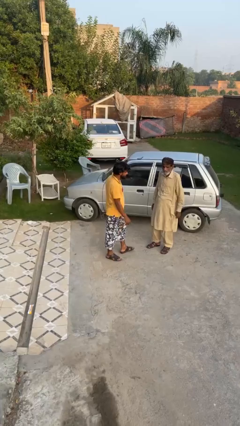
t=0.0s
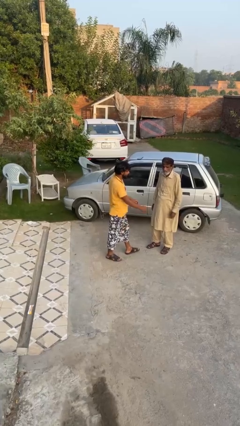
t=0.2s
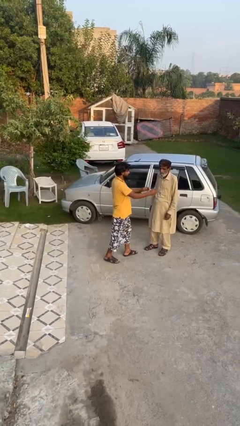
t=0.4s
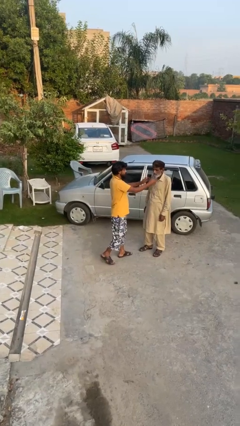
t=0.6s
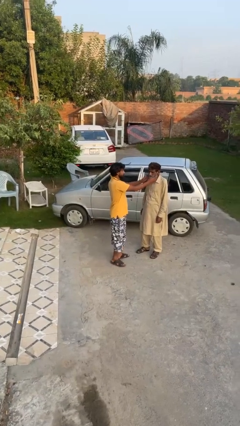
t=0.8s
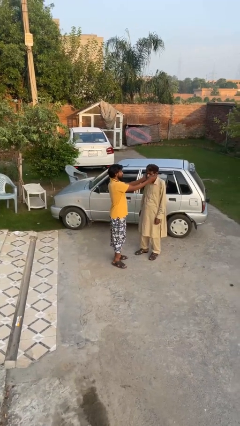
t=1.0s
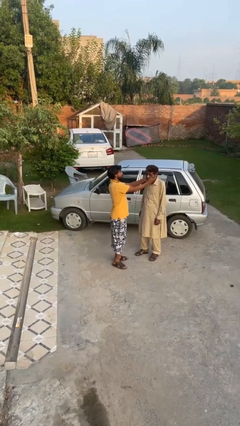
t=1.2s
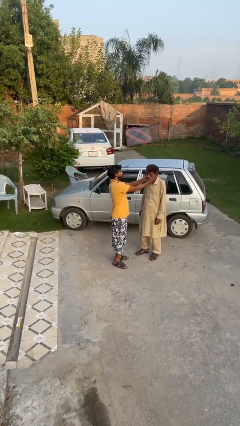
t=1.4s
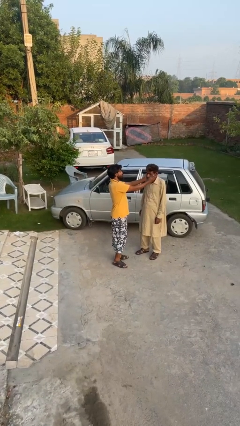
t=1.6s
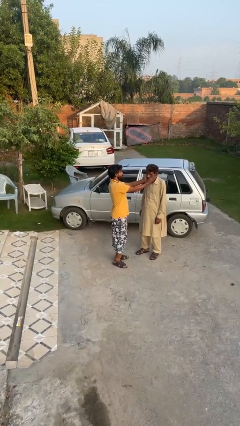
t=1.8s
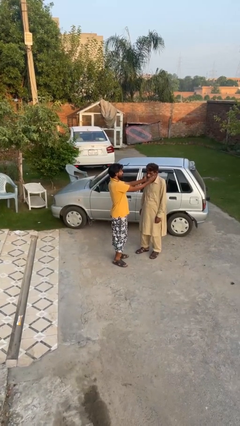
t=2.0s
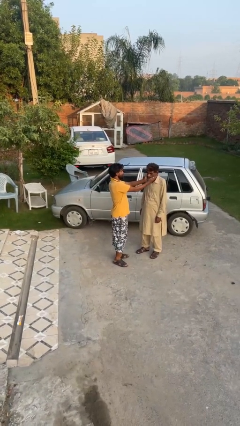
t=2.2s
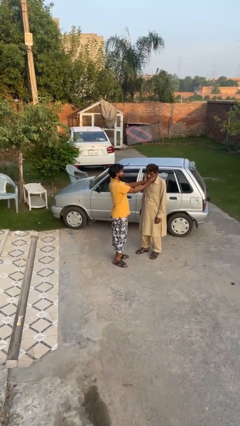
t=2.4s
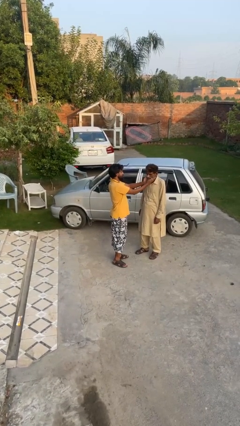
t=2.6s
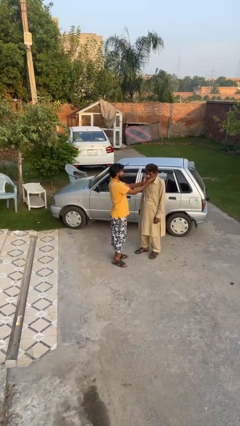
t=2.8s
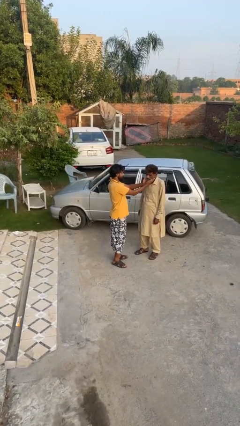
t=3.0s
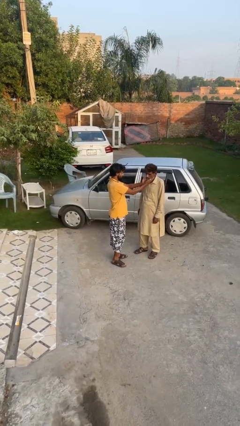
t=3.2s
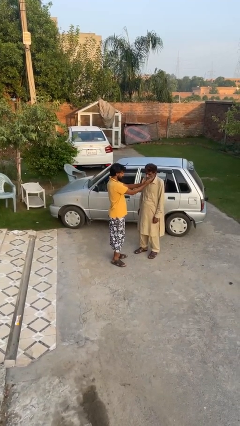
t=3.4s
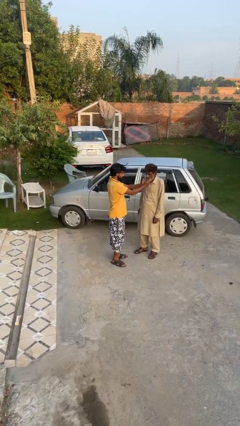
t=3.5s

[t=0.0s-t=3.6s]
person touches face of person

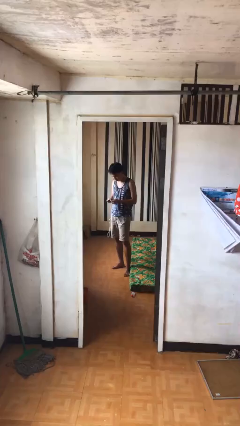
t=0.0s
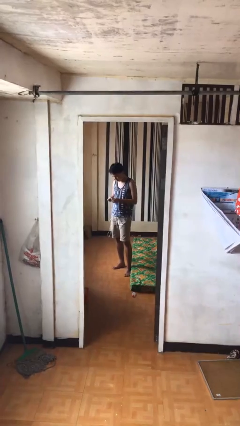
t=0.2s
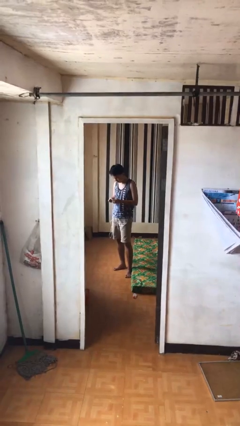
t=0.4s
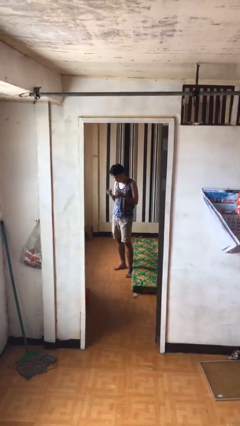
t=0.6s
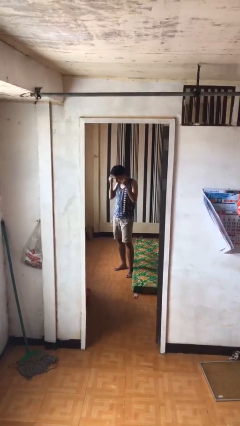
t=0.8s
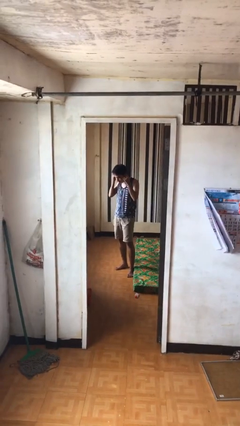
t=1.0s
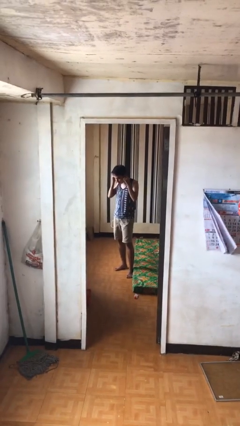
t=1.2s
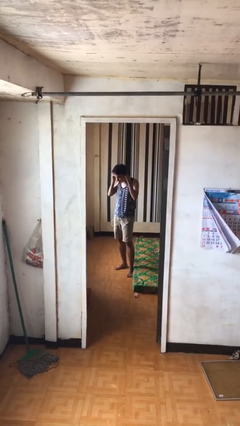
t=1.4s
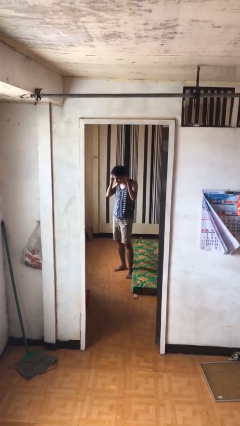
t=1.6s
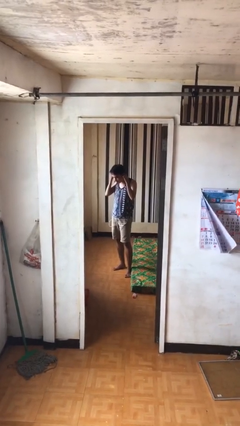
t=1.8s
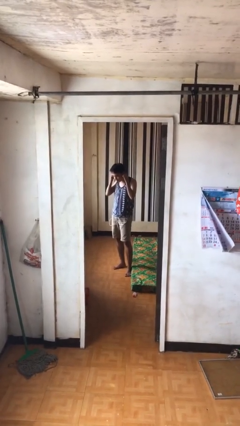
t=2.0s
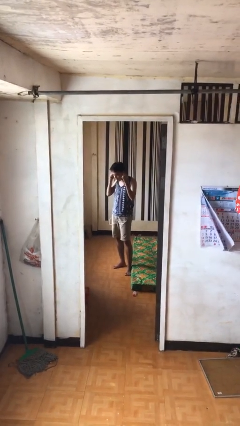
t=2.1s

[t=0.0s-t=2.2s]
person puts on headphones

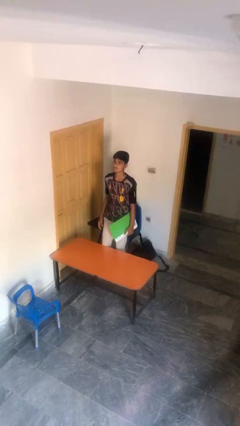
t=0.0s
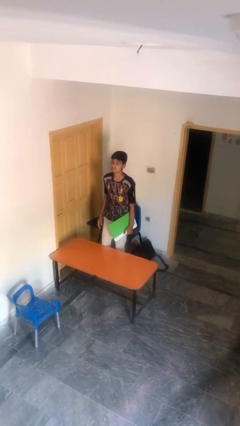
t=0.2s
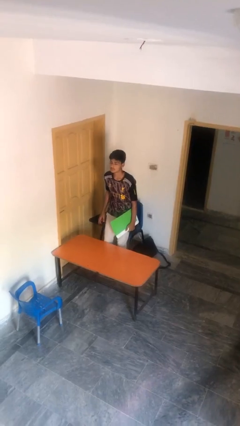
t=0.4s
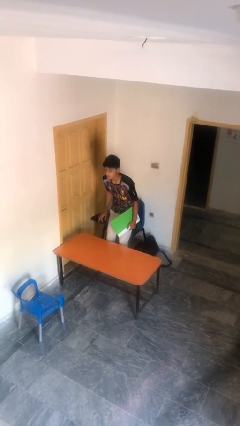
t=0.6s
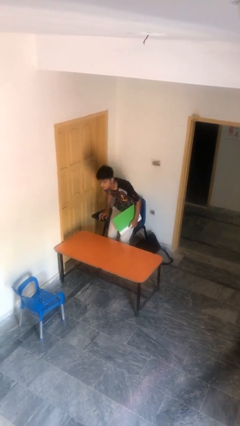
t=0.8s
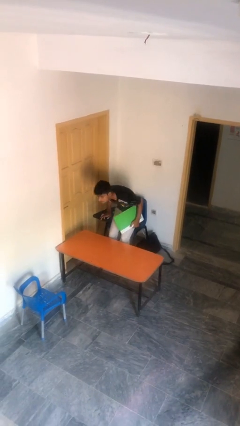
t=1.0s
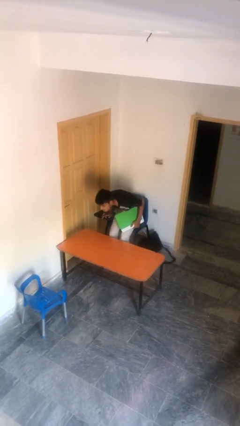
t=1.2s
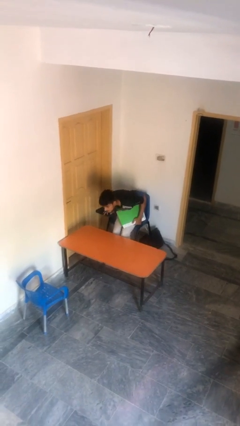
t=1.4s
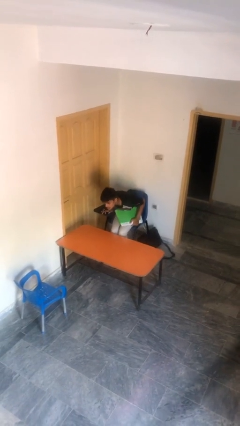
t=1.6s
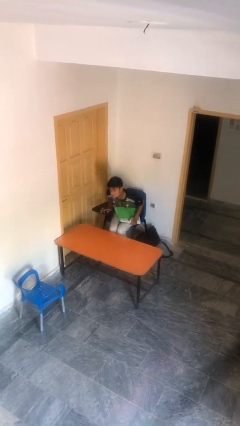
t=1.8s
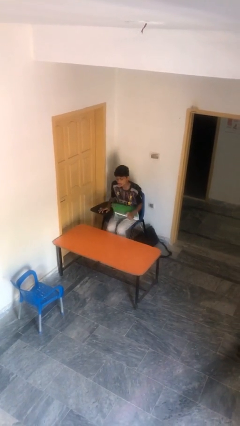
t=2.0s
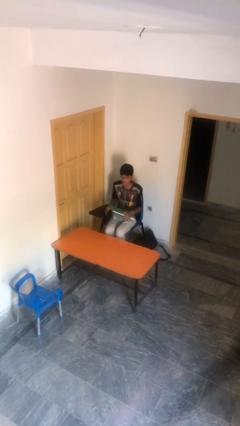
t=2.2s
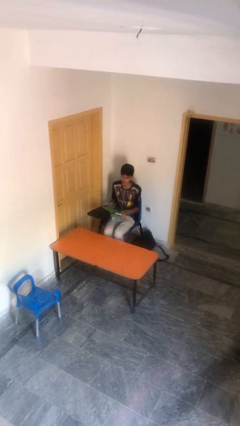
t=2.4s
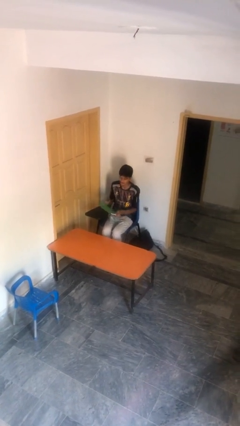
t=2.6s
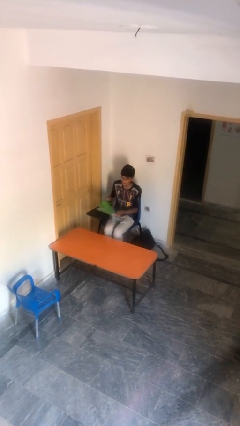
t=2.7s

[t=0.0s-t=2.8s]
person sits down

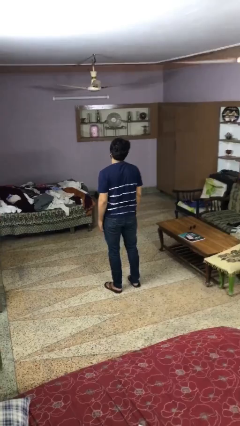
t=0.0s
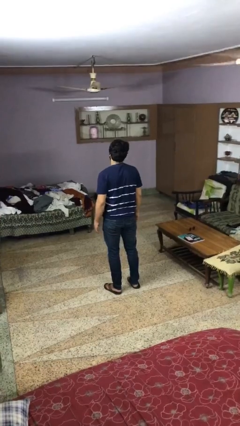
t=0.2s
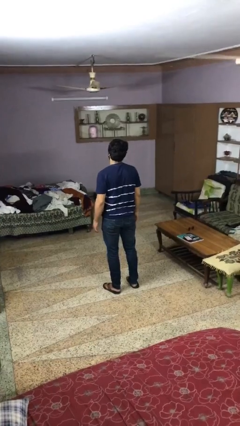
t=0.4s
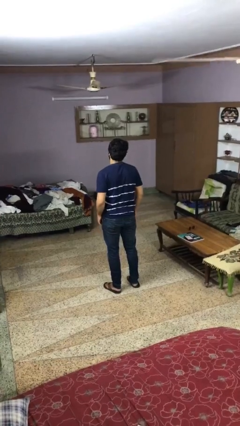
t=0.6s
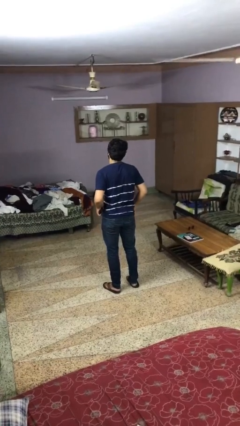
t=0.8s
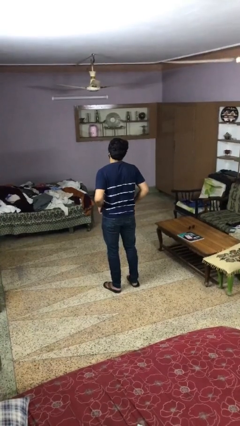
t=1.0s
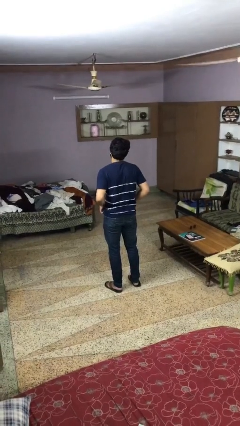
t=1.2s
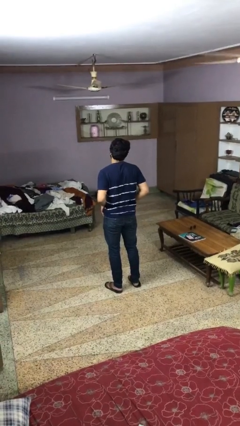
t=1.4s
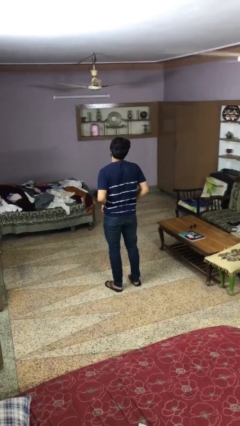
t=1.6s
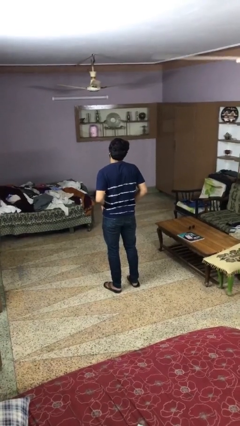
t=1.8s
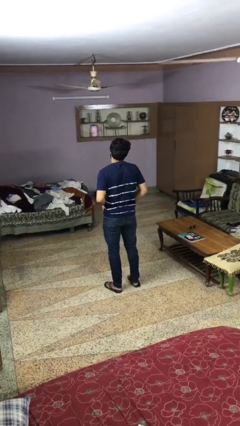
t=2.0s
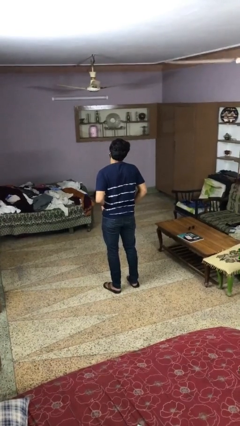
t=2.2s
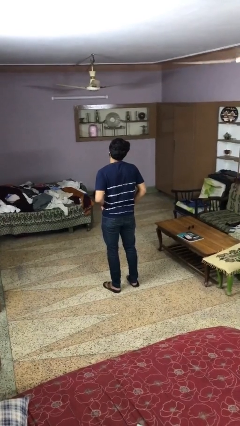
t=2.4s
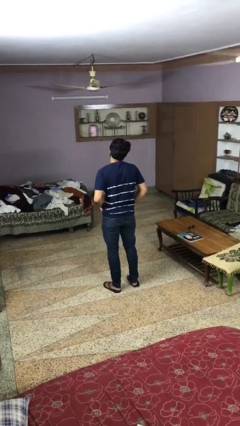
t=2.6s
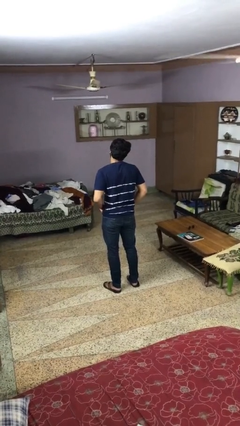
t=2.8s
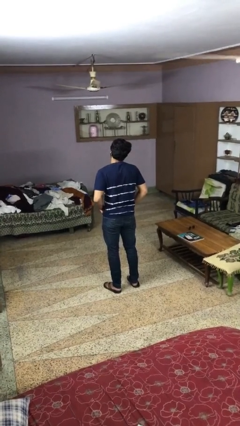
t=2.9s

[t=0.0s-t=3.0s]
person puts hands in back pockets

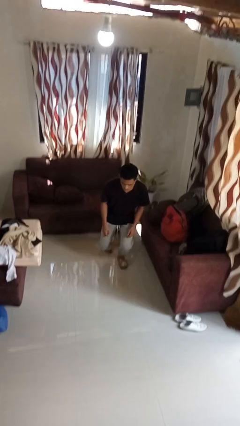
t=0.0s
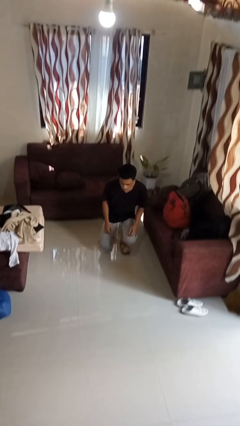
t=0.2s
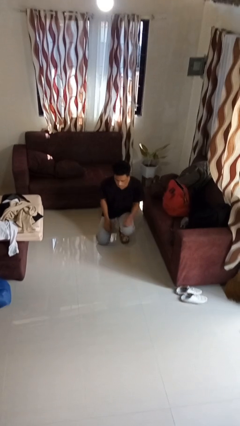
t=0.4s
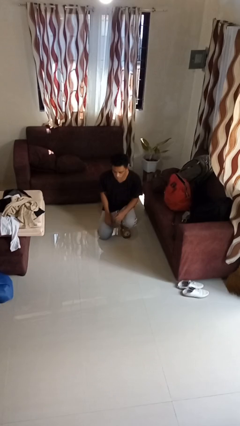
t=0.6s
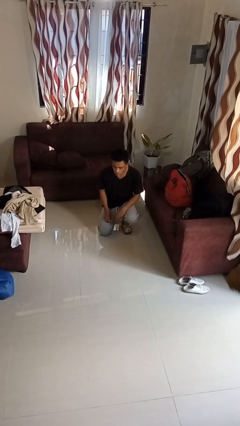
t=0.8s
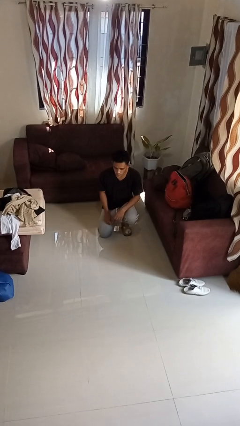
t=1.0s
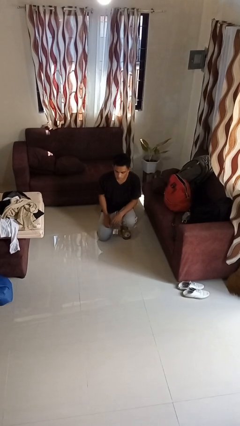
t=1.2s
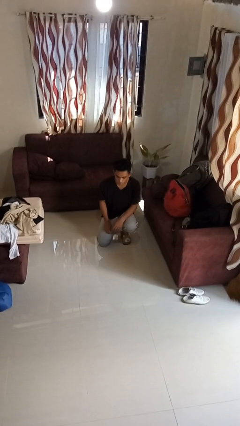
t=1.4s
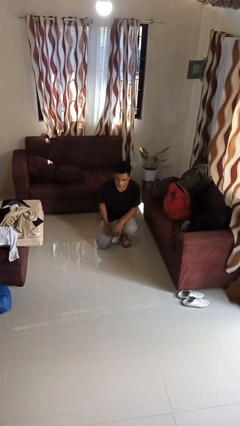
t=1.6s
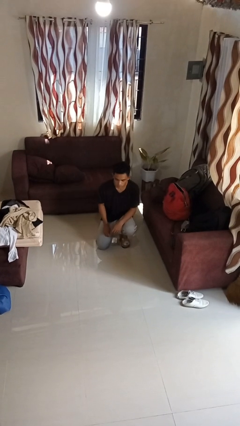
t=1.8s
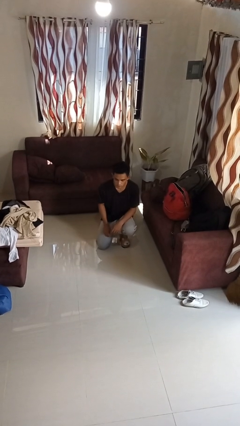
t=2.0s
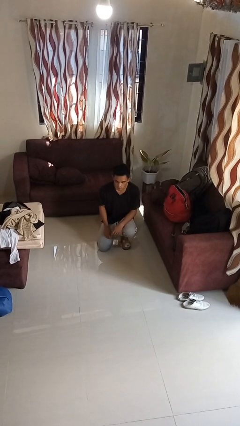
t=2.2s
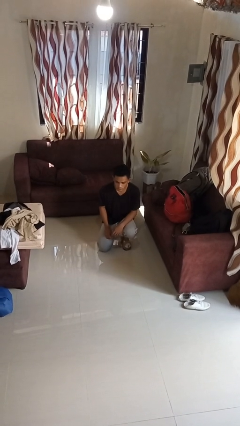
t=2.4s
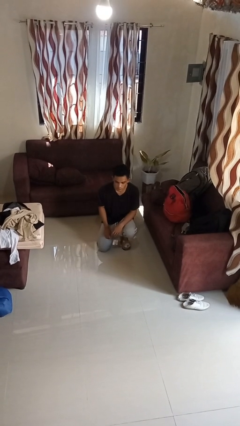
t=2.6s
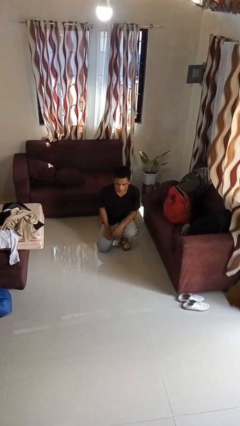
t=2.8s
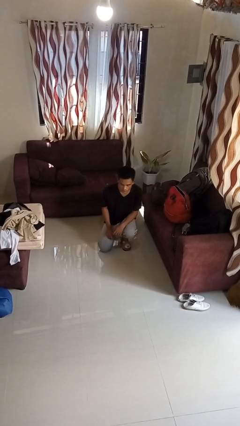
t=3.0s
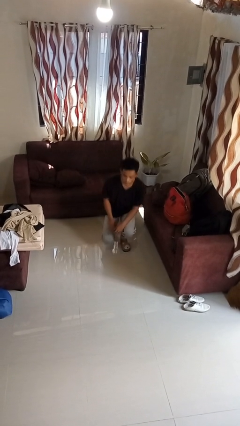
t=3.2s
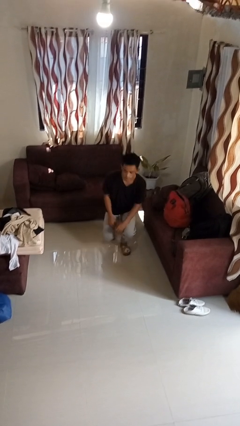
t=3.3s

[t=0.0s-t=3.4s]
person kneels

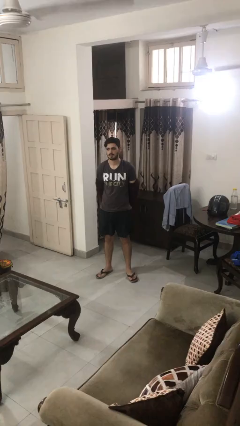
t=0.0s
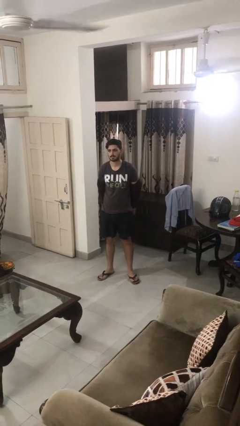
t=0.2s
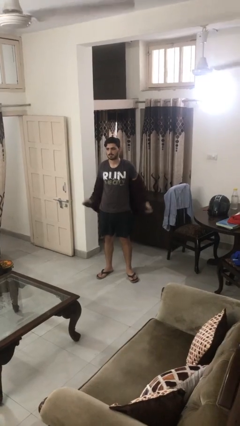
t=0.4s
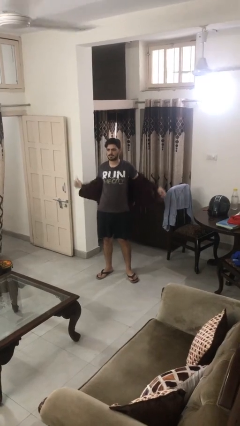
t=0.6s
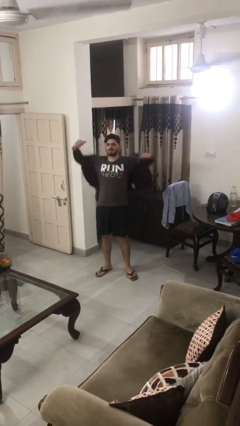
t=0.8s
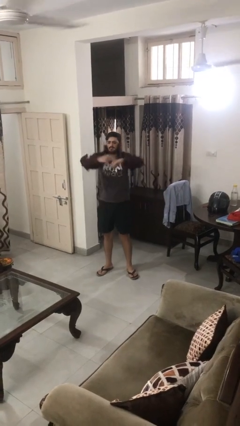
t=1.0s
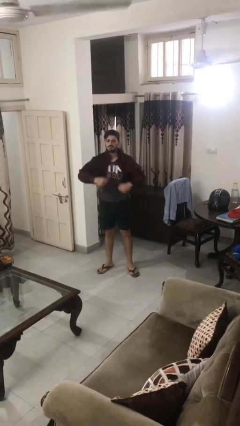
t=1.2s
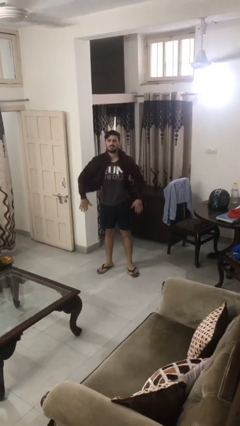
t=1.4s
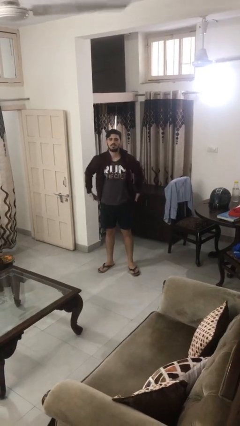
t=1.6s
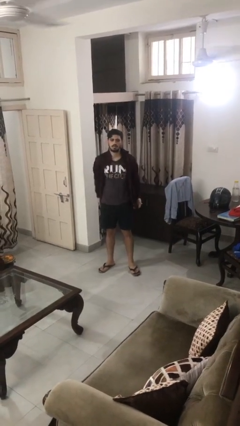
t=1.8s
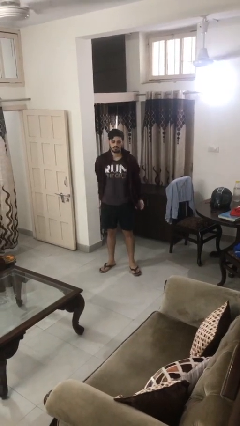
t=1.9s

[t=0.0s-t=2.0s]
person puts on jacket

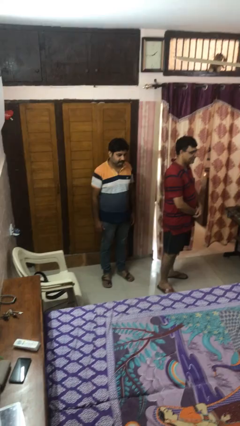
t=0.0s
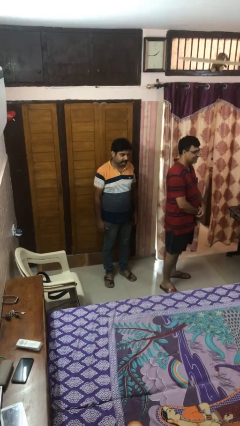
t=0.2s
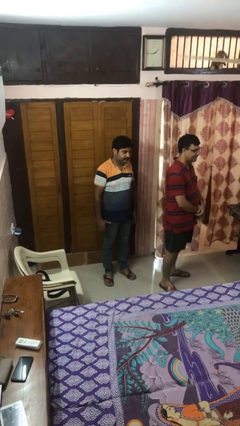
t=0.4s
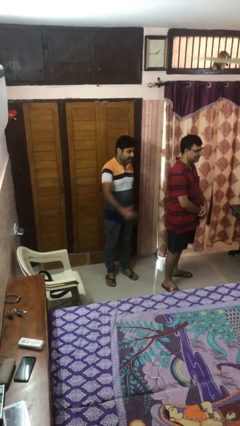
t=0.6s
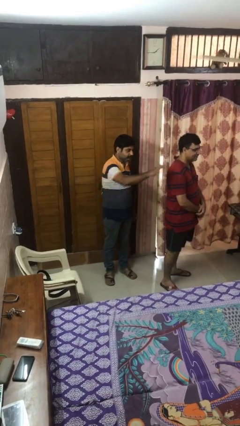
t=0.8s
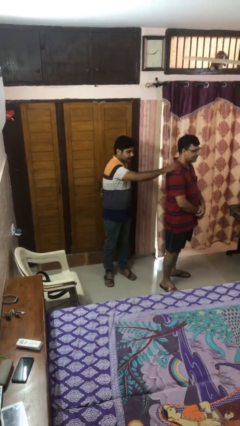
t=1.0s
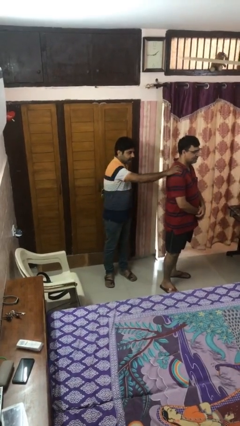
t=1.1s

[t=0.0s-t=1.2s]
person grabs person by shoulder
